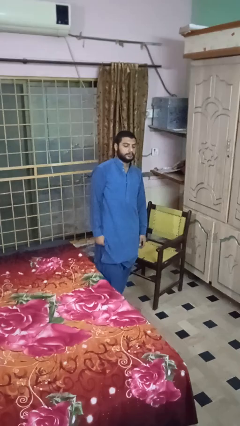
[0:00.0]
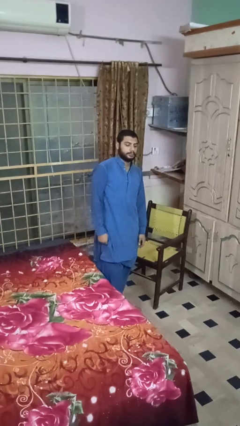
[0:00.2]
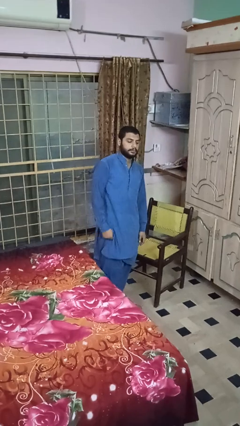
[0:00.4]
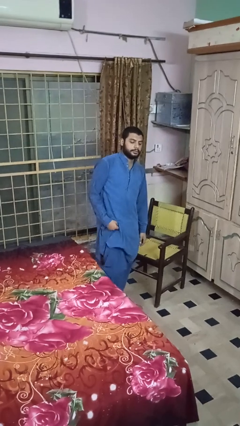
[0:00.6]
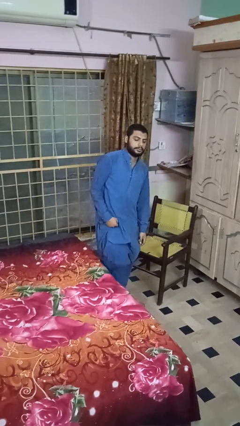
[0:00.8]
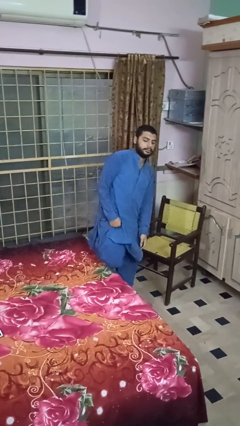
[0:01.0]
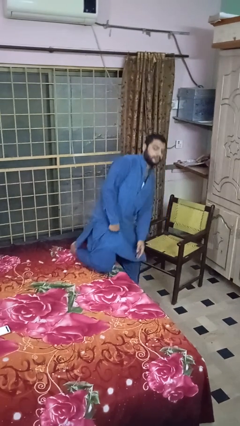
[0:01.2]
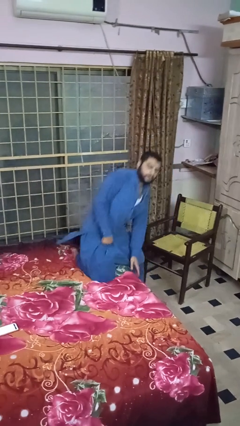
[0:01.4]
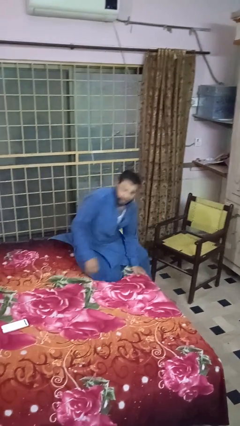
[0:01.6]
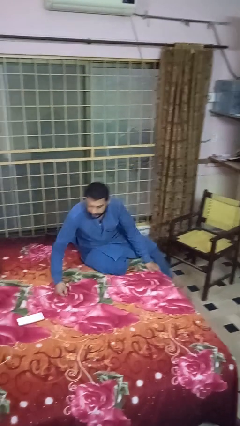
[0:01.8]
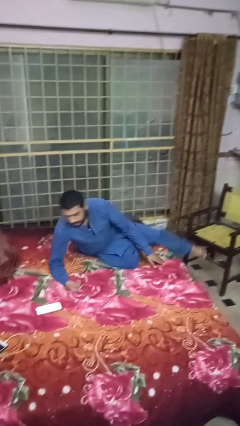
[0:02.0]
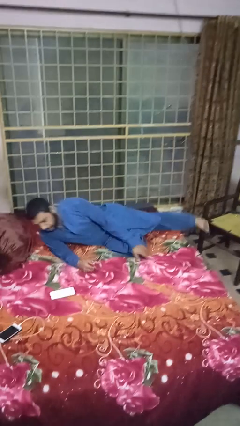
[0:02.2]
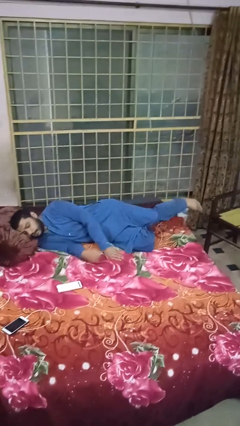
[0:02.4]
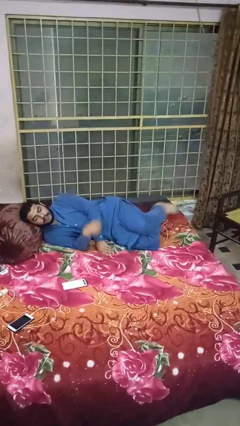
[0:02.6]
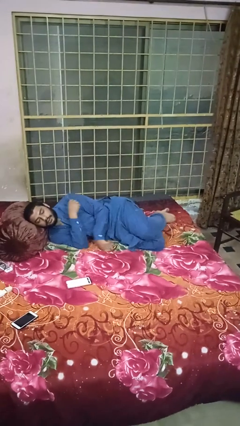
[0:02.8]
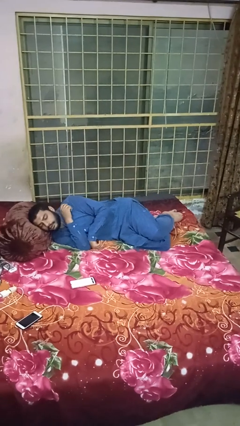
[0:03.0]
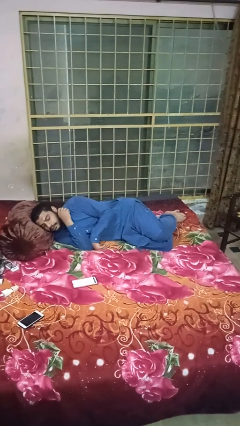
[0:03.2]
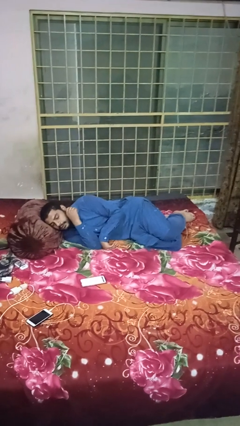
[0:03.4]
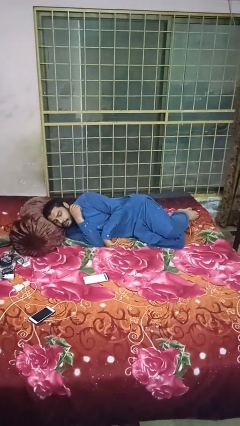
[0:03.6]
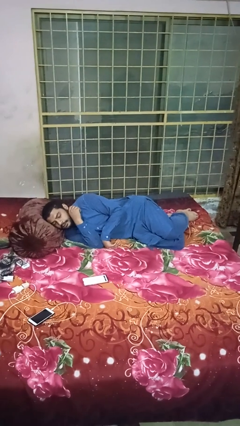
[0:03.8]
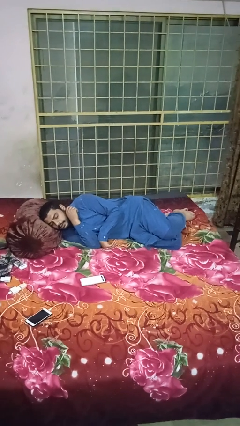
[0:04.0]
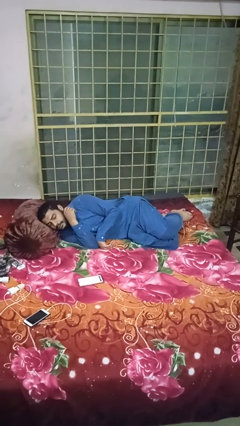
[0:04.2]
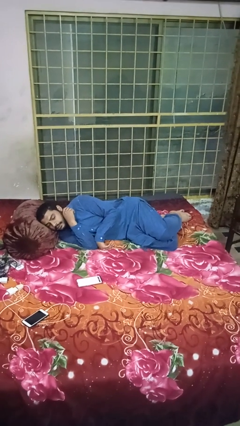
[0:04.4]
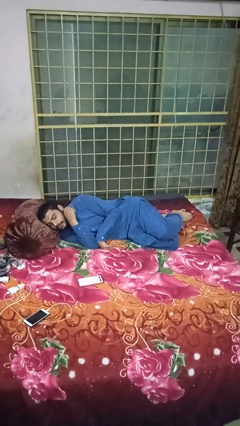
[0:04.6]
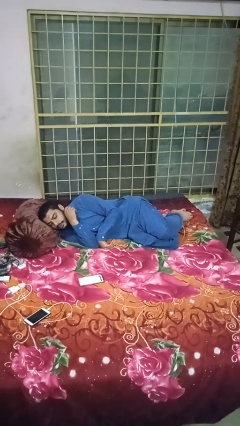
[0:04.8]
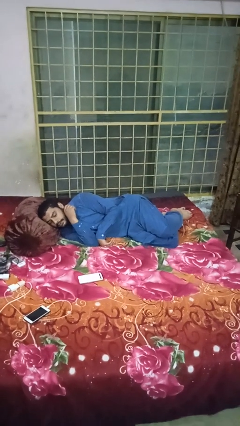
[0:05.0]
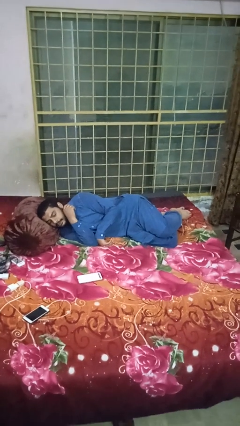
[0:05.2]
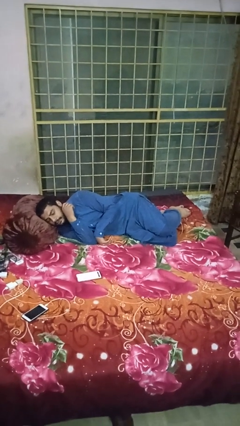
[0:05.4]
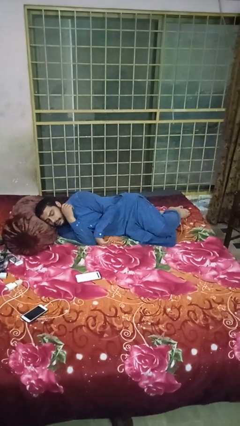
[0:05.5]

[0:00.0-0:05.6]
person lies down on bed

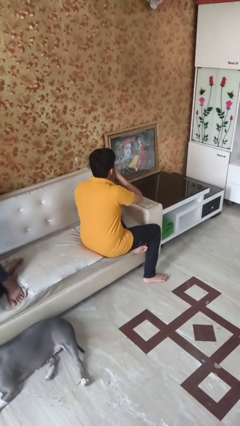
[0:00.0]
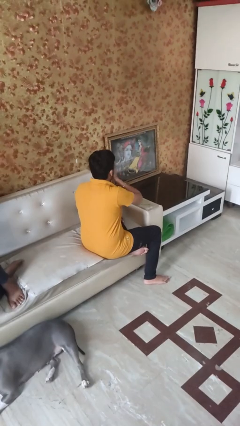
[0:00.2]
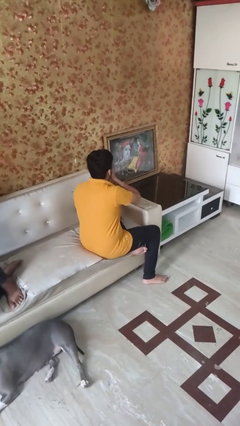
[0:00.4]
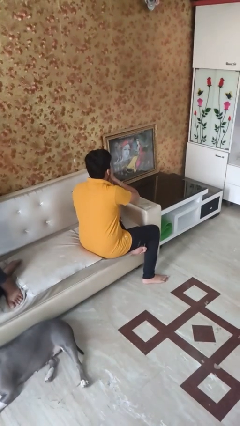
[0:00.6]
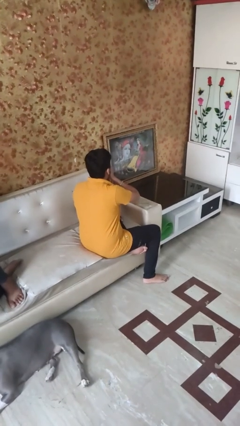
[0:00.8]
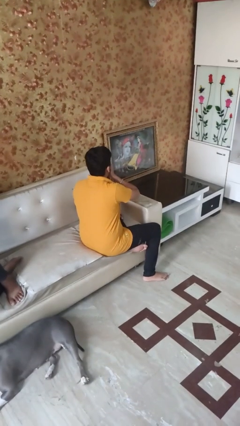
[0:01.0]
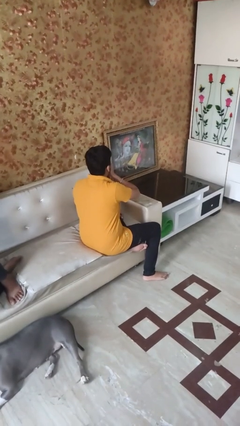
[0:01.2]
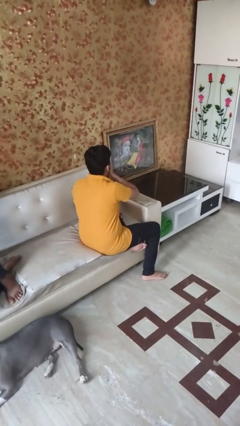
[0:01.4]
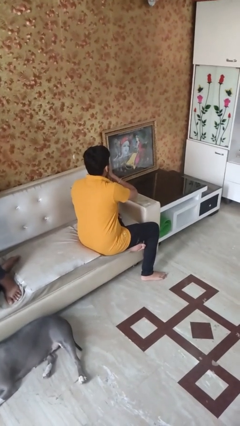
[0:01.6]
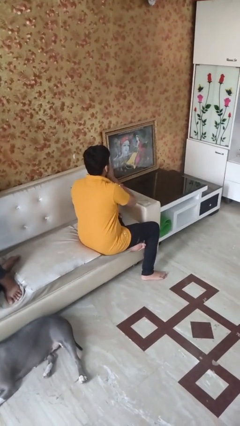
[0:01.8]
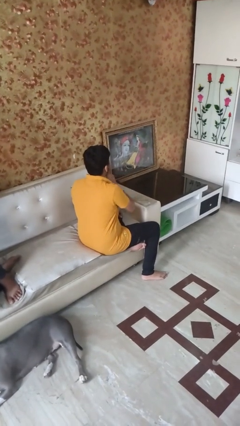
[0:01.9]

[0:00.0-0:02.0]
person yawns

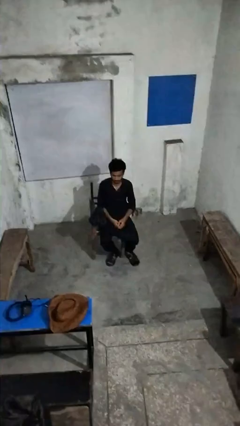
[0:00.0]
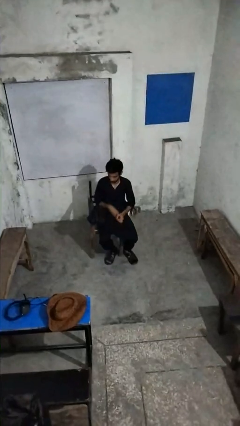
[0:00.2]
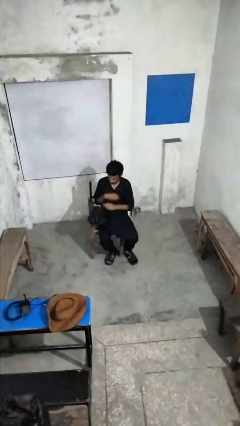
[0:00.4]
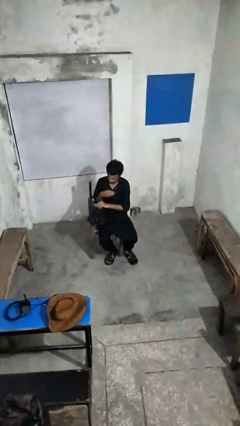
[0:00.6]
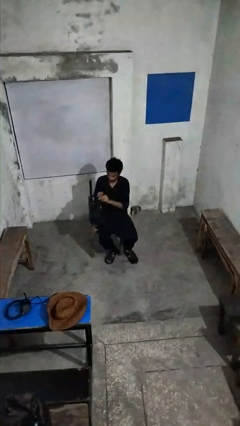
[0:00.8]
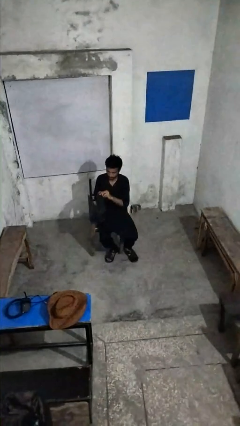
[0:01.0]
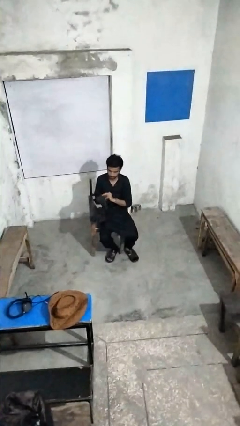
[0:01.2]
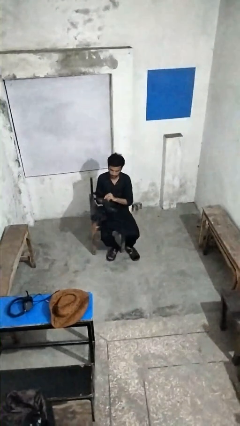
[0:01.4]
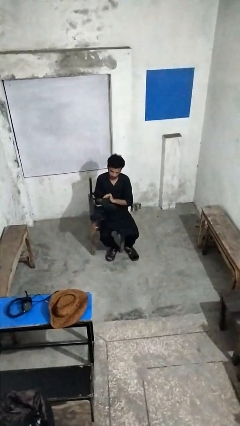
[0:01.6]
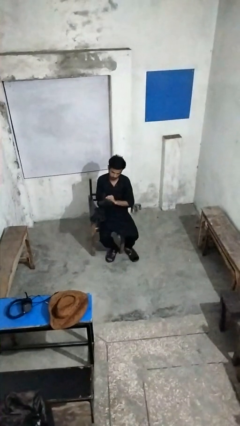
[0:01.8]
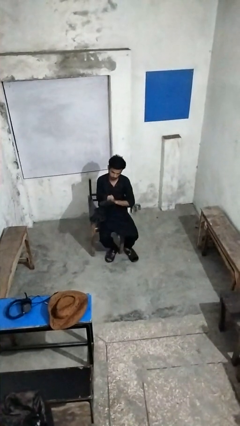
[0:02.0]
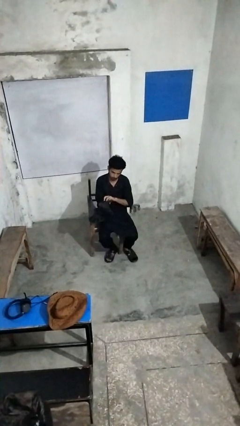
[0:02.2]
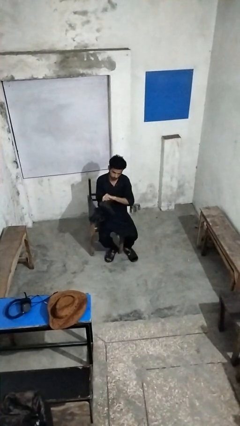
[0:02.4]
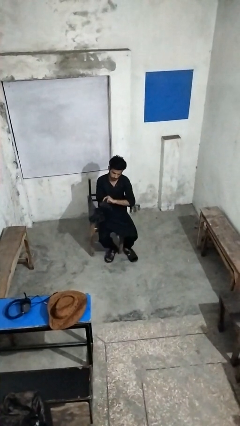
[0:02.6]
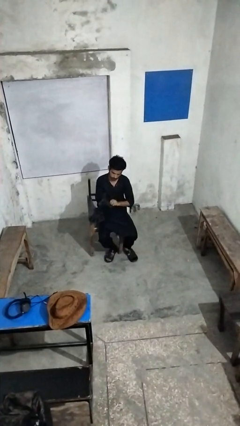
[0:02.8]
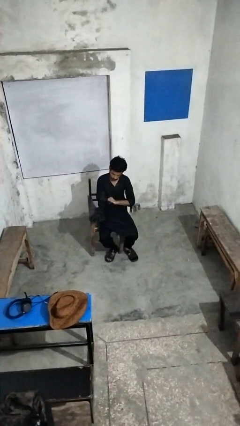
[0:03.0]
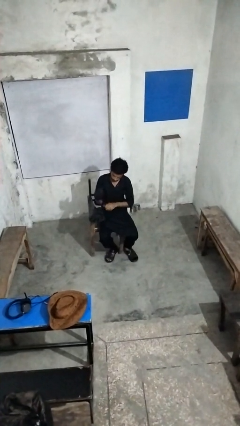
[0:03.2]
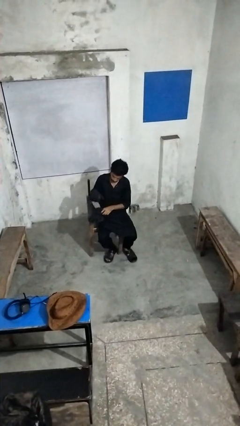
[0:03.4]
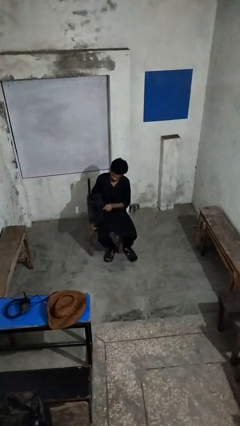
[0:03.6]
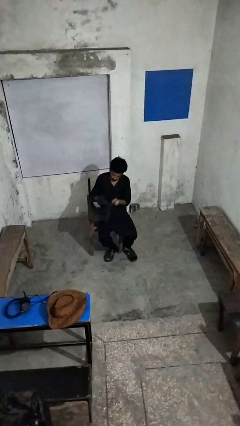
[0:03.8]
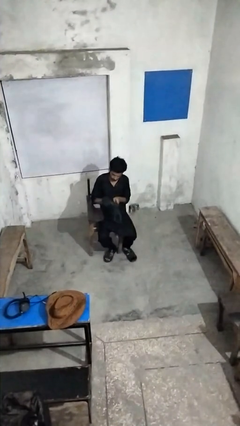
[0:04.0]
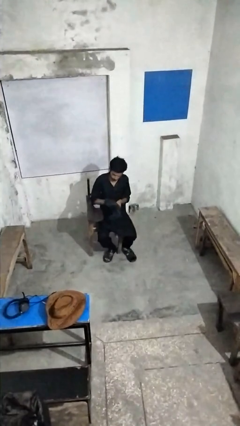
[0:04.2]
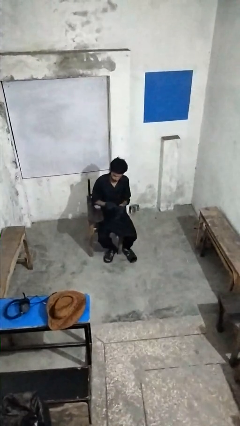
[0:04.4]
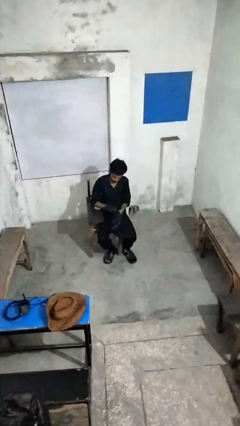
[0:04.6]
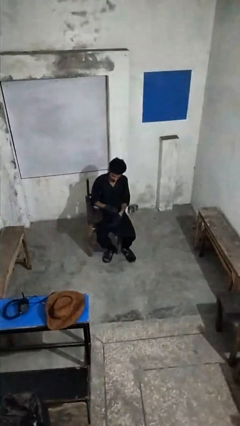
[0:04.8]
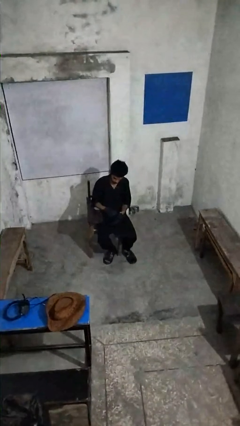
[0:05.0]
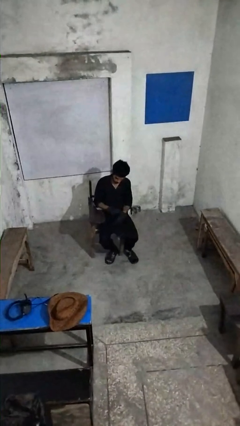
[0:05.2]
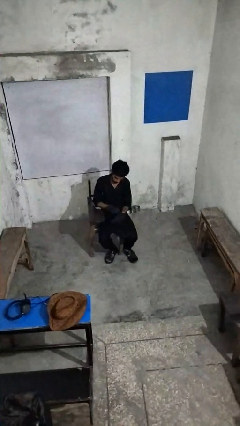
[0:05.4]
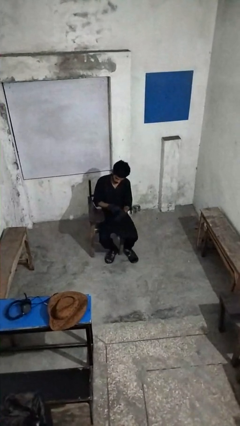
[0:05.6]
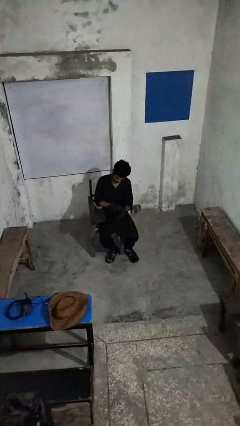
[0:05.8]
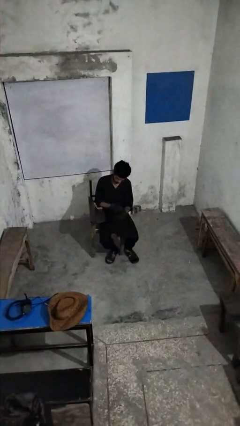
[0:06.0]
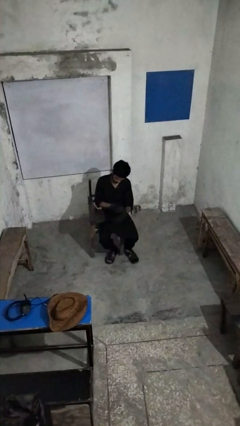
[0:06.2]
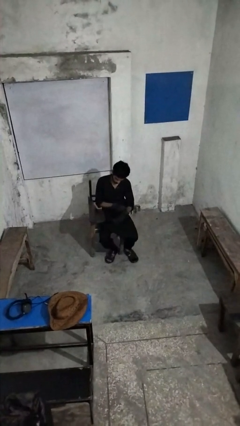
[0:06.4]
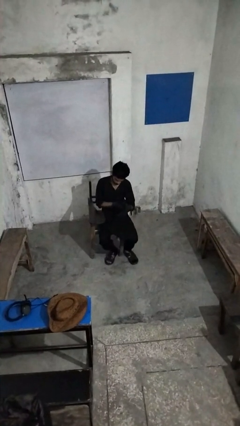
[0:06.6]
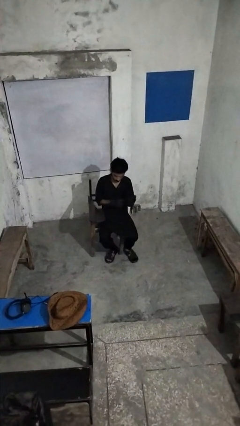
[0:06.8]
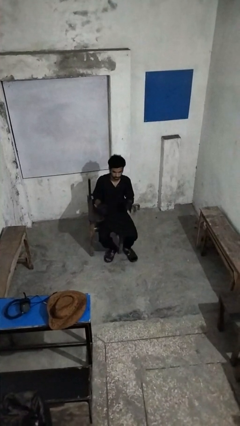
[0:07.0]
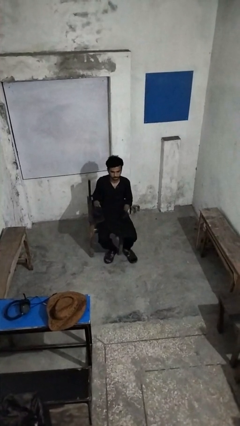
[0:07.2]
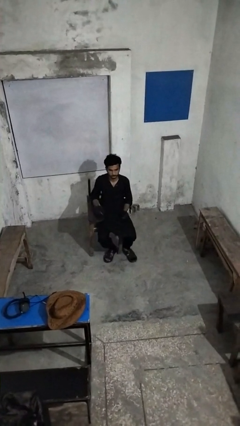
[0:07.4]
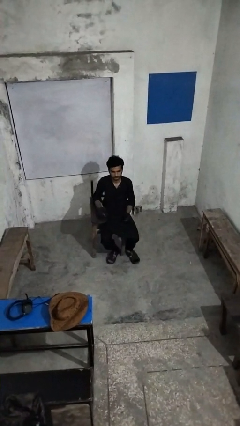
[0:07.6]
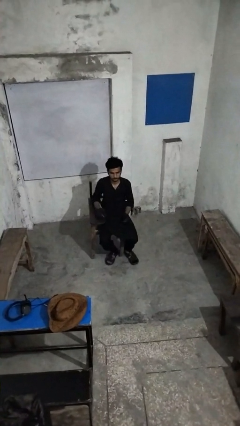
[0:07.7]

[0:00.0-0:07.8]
person puts on gloves

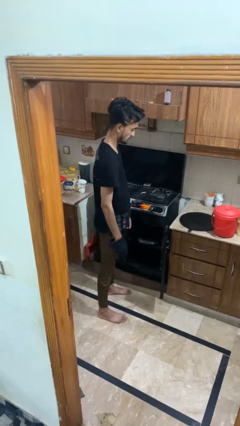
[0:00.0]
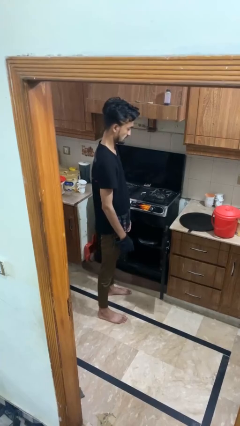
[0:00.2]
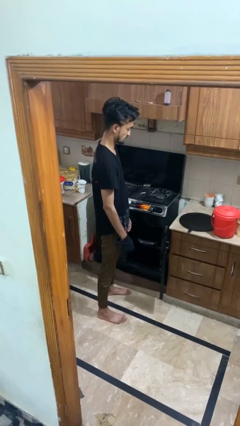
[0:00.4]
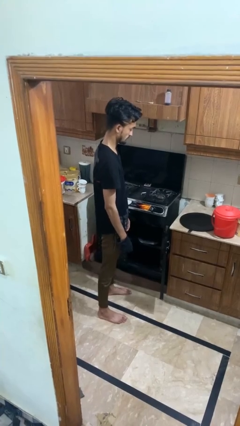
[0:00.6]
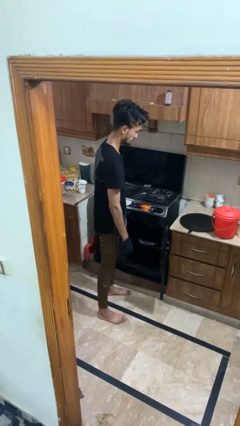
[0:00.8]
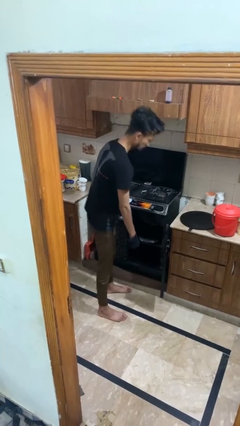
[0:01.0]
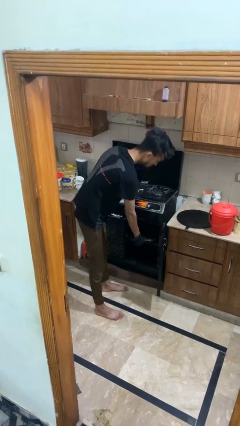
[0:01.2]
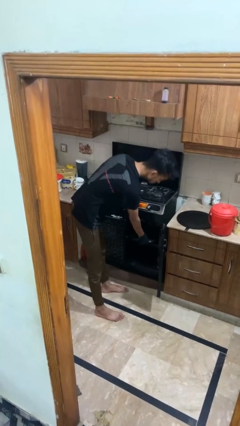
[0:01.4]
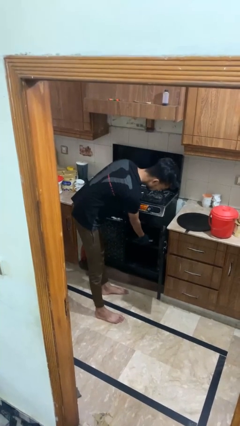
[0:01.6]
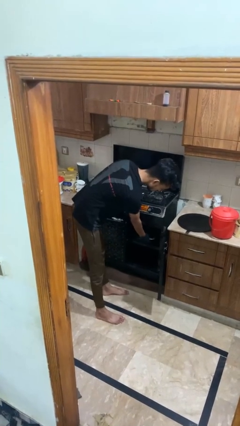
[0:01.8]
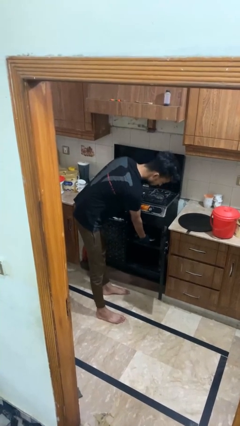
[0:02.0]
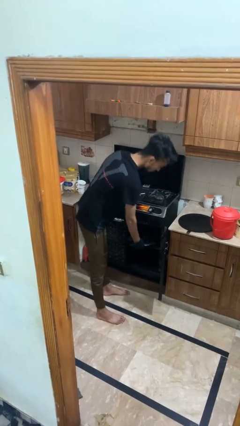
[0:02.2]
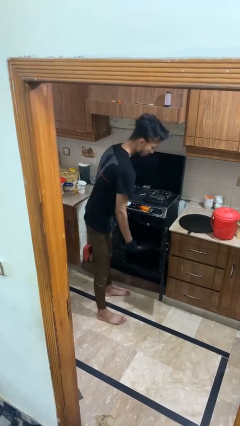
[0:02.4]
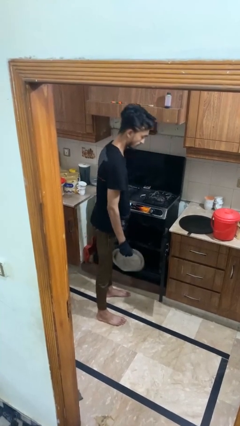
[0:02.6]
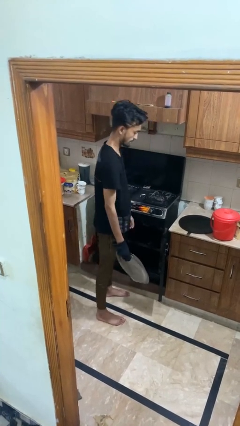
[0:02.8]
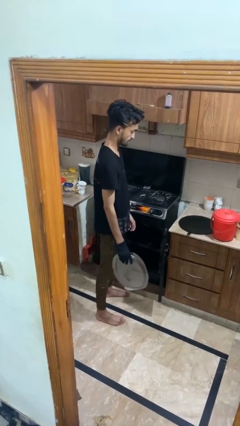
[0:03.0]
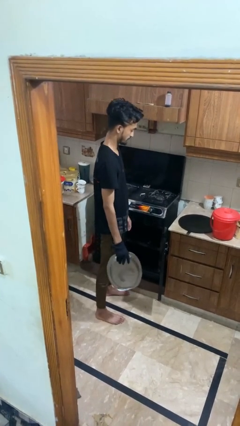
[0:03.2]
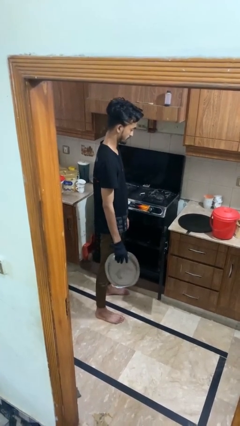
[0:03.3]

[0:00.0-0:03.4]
person takes object from oven
